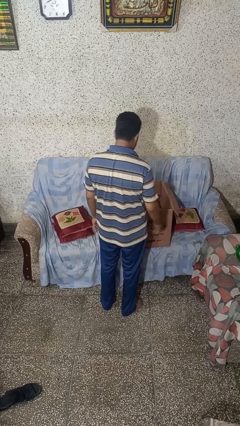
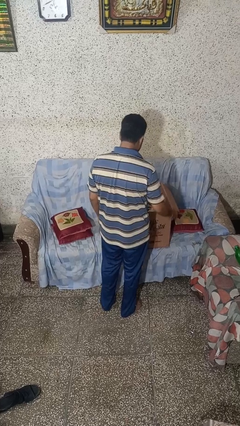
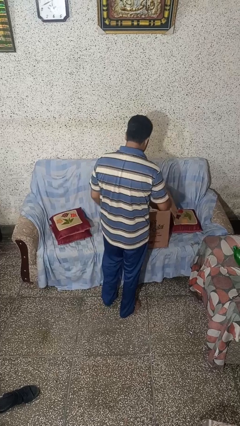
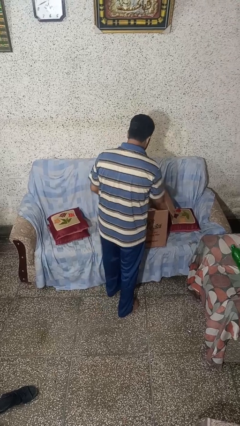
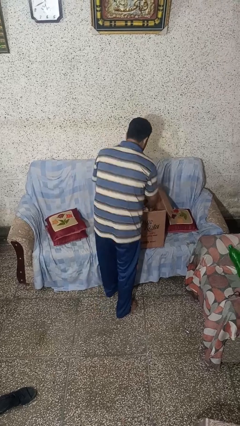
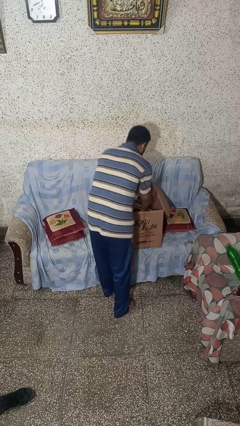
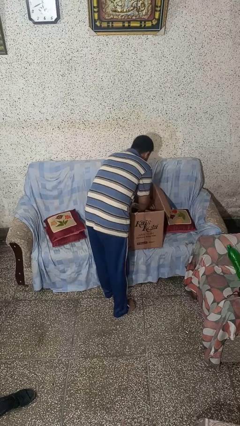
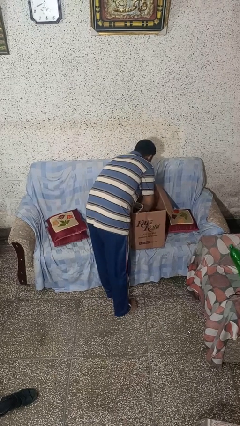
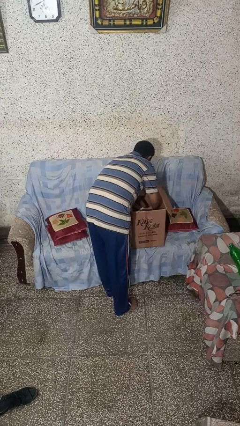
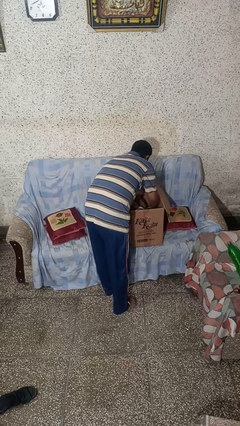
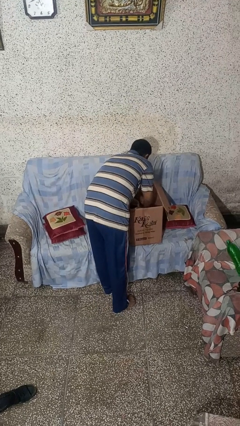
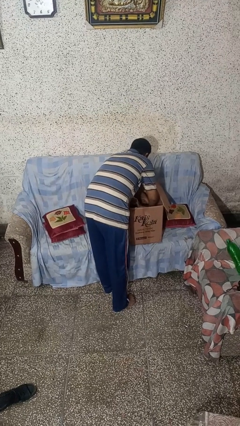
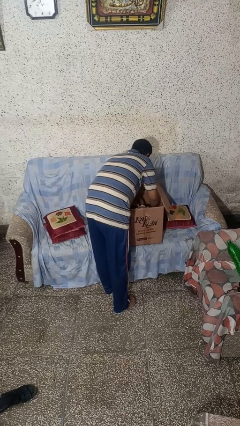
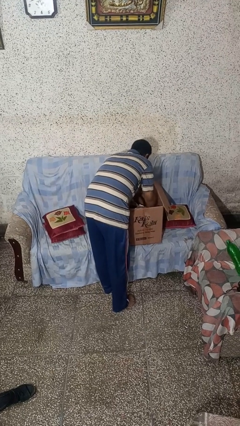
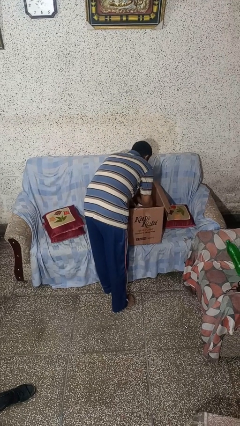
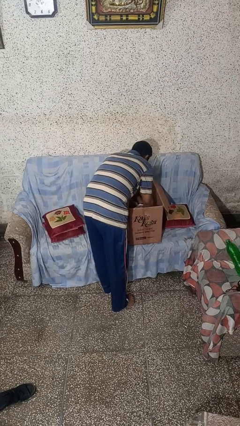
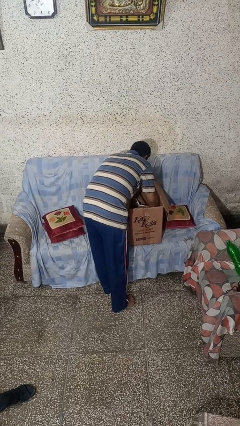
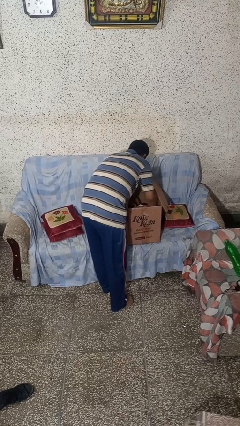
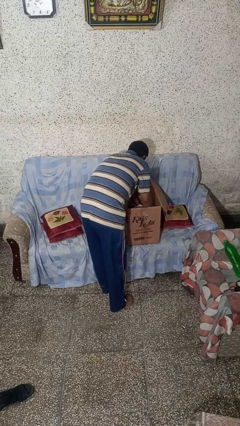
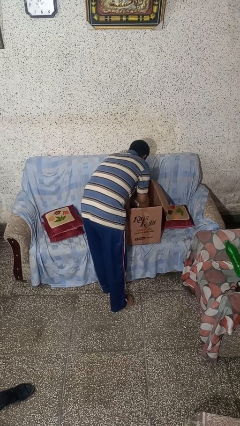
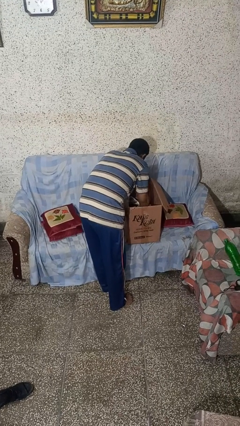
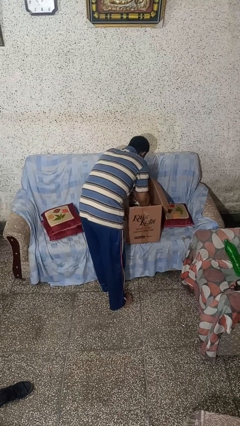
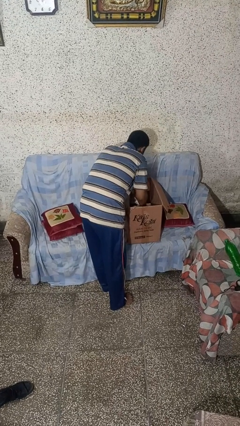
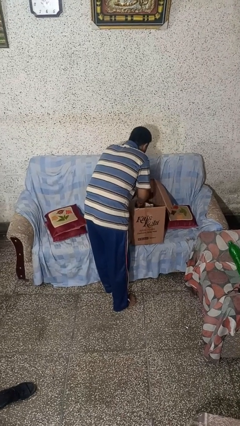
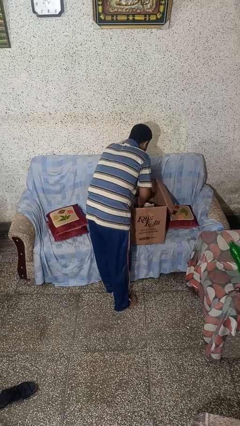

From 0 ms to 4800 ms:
person searches in box

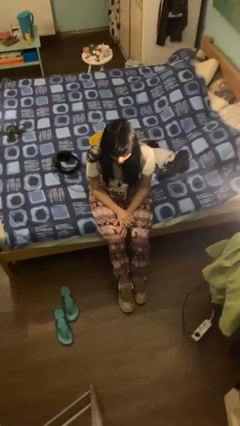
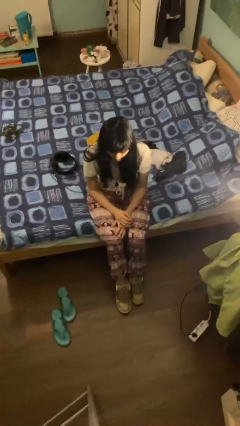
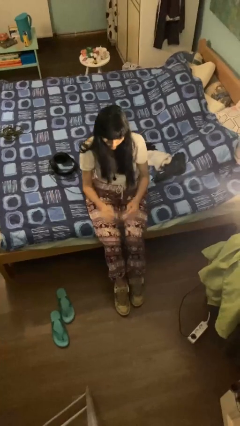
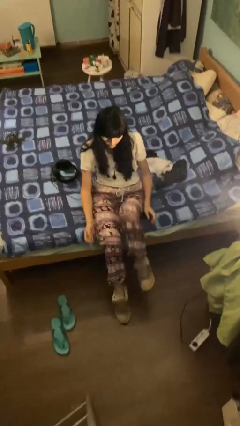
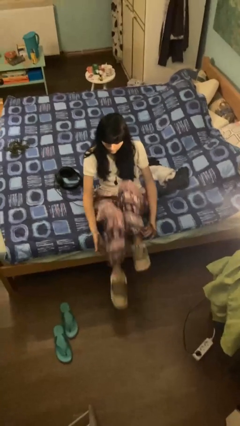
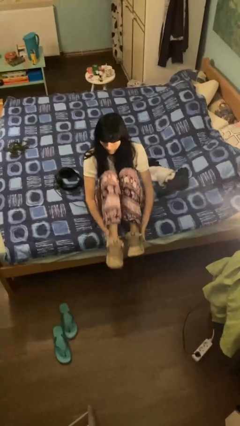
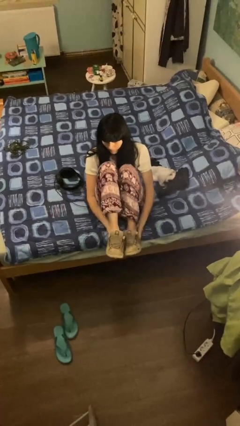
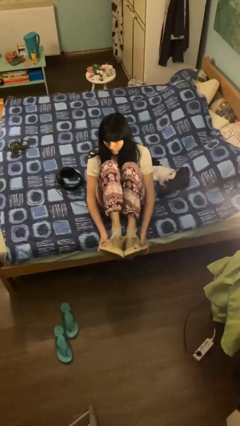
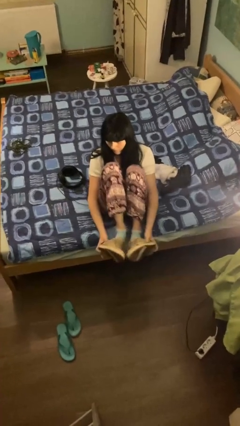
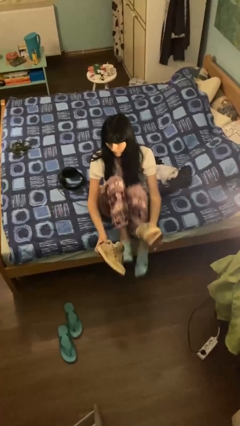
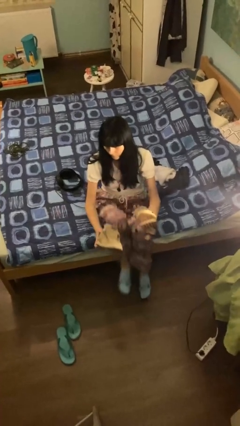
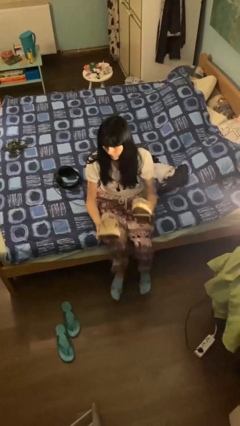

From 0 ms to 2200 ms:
person takes off shoes

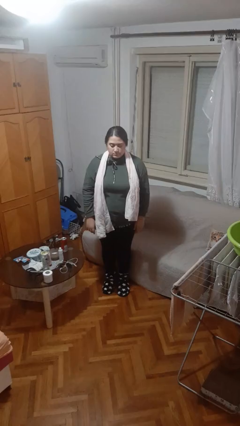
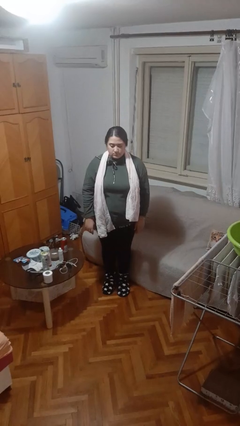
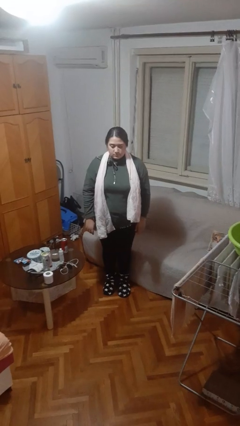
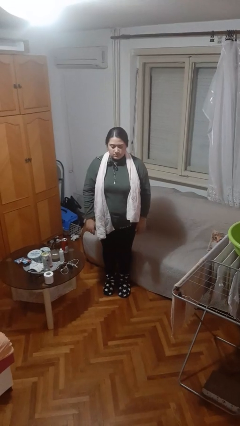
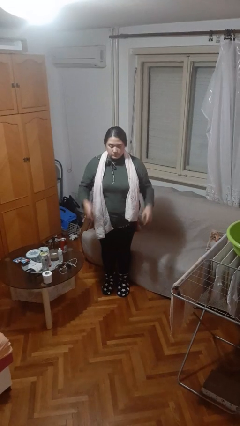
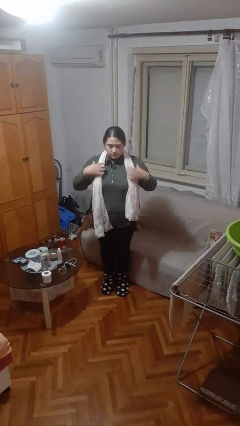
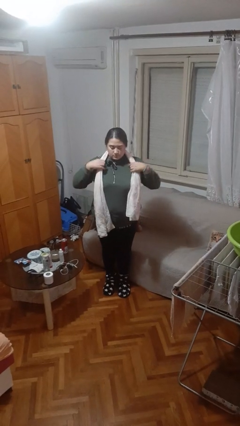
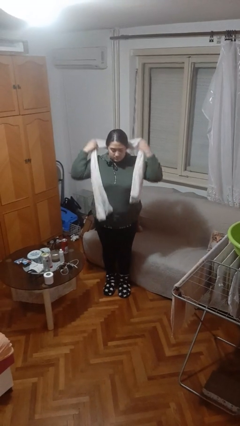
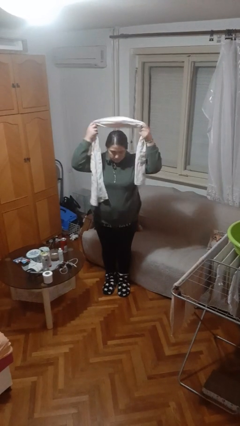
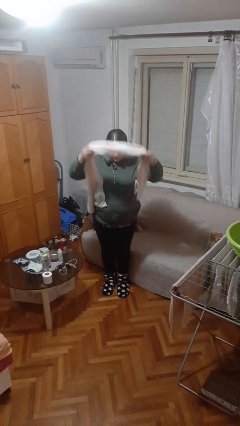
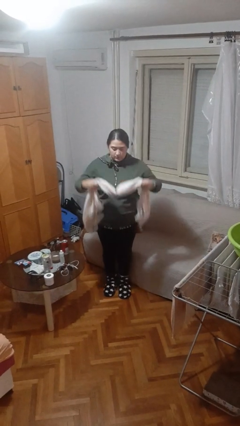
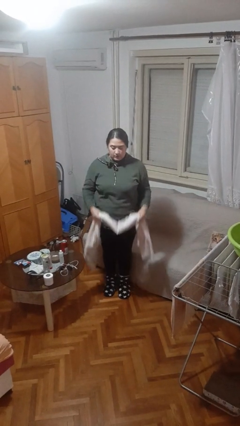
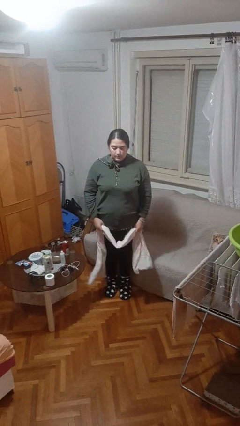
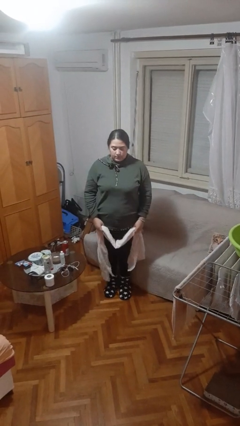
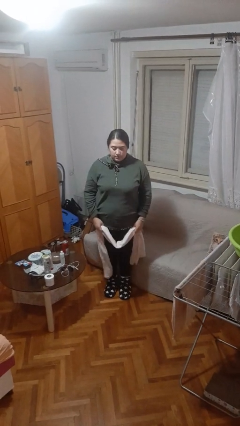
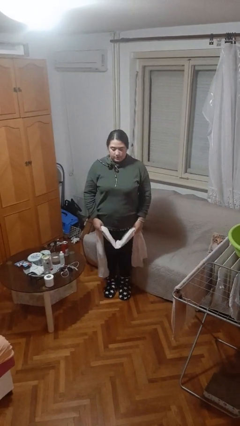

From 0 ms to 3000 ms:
person takes off scarf

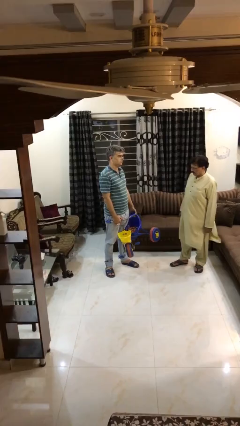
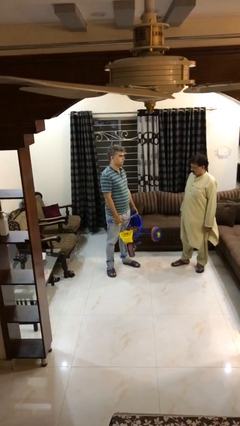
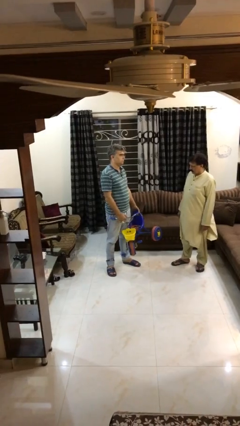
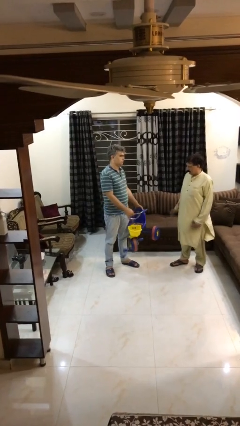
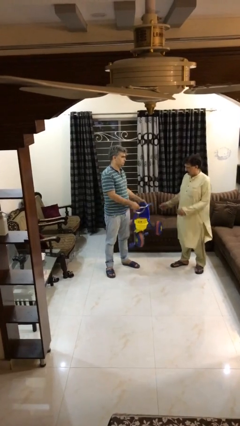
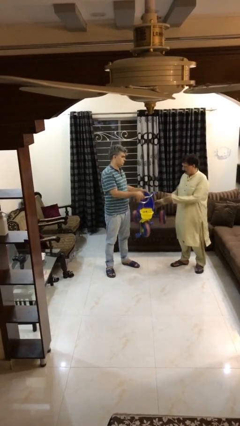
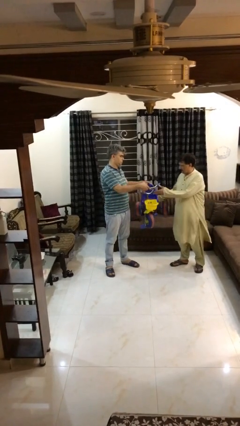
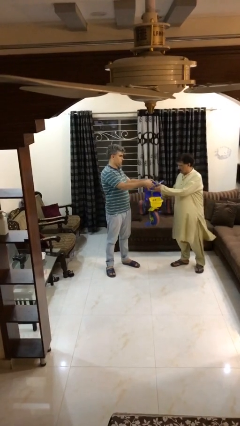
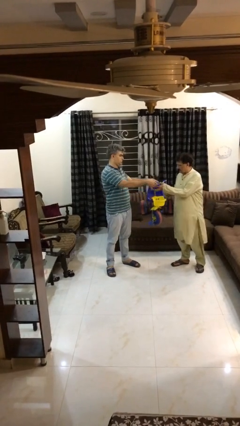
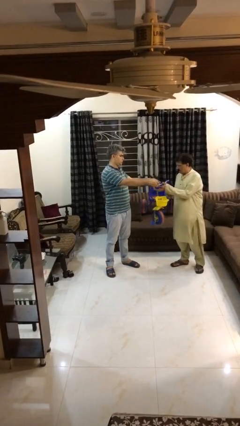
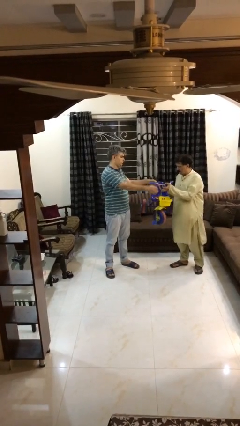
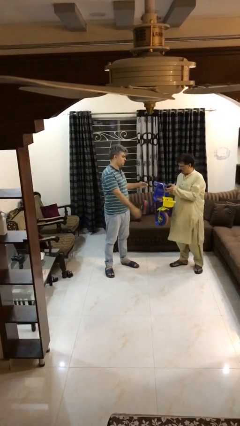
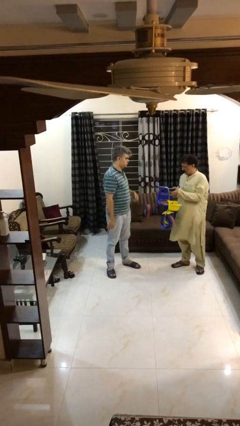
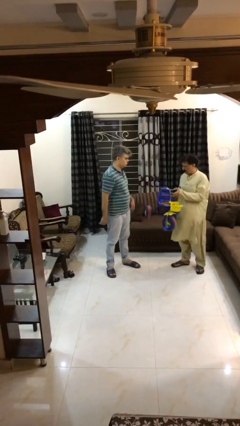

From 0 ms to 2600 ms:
person transfers object to person

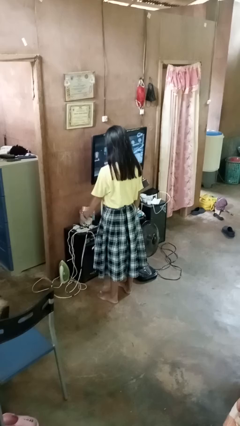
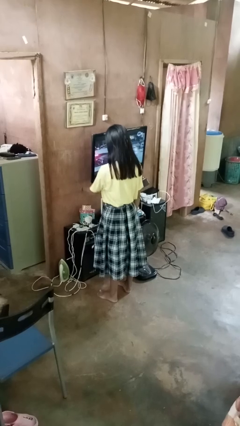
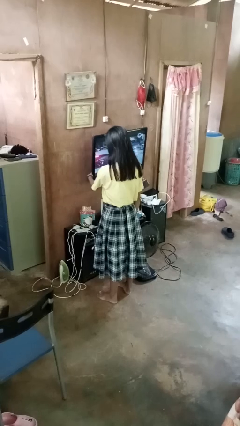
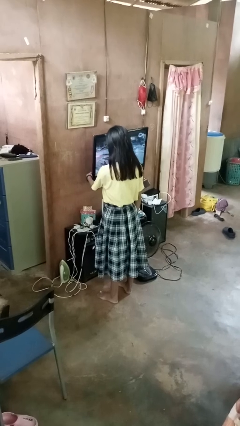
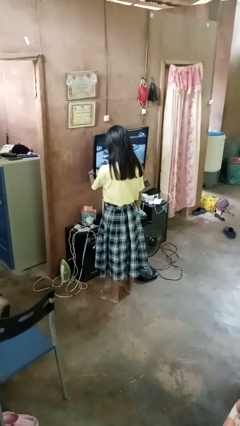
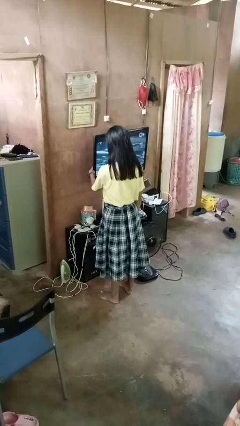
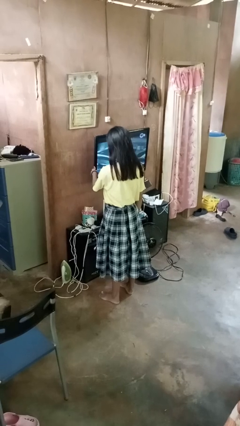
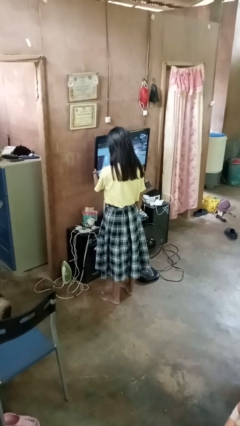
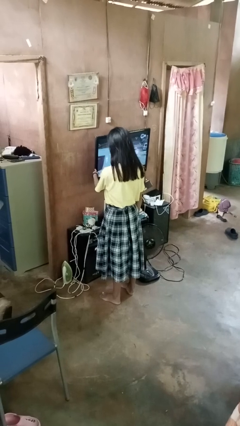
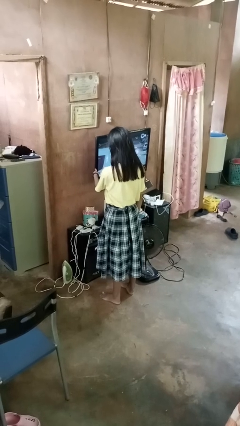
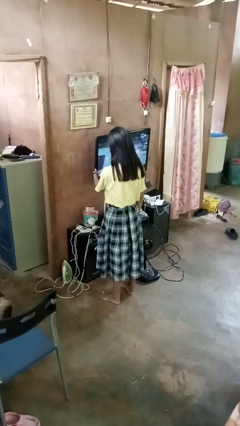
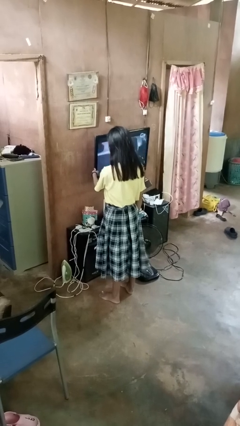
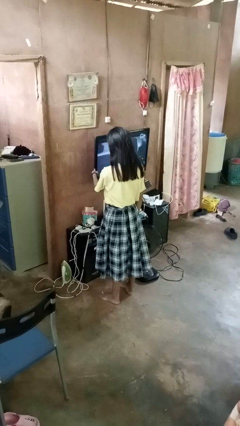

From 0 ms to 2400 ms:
person taps object with finger

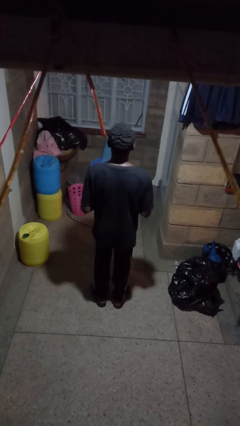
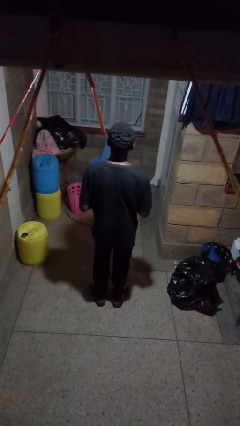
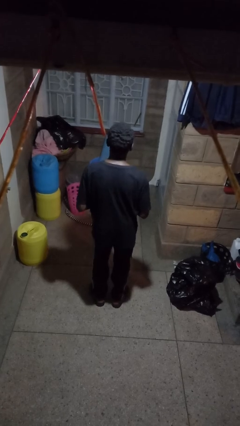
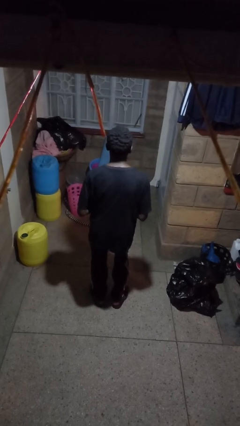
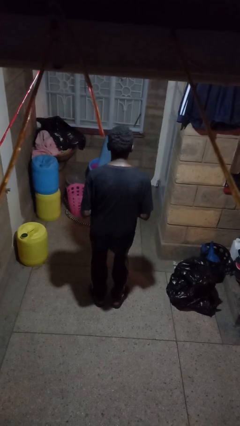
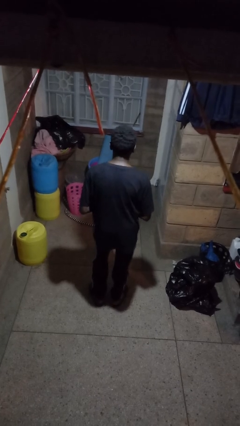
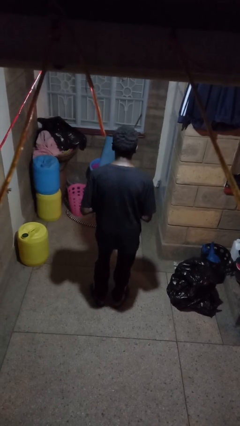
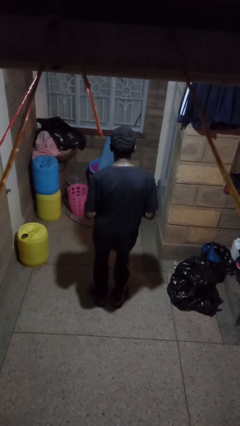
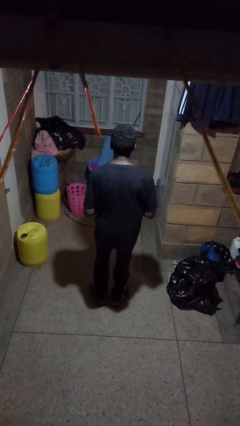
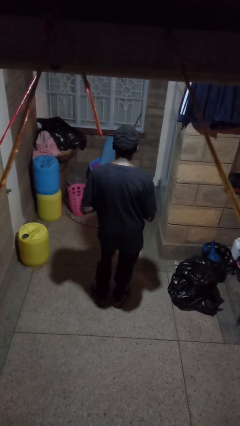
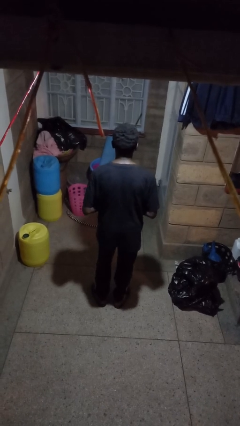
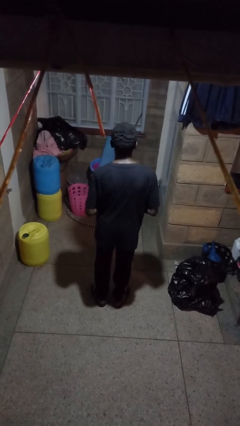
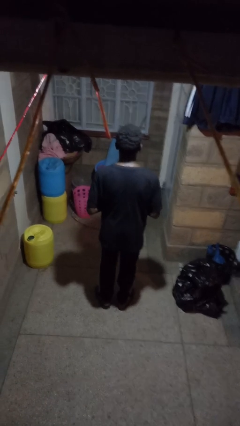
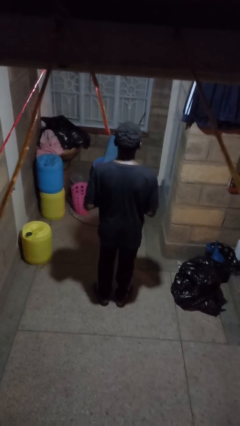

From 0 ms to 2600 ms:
person wiggles hips
